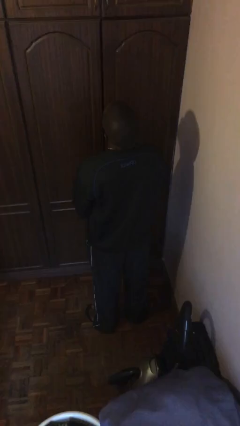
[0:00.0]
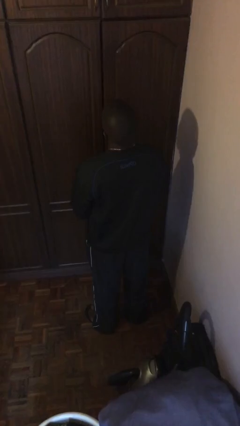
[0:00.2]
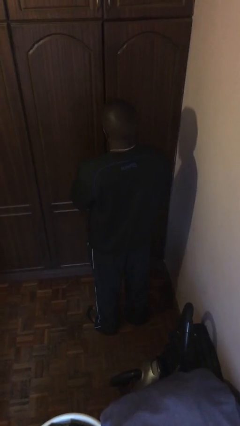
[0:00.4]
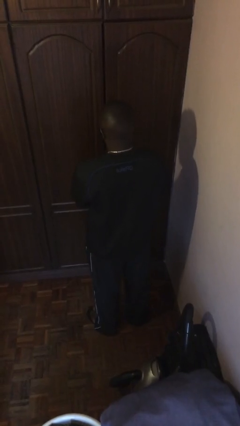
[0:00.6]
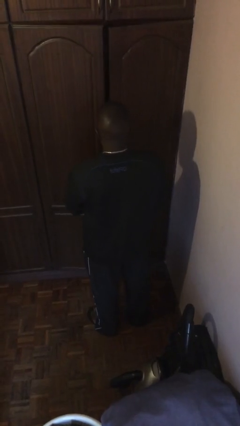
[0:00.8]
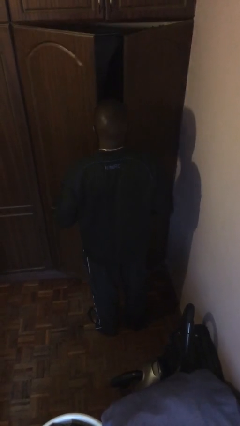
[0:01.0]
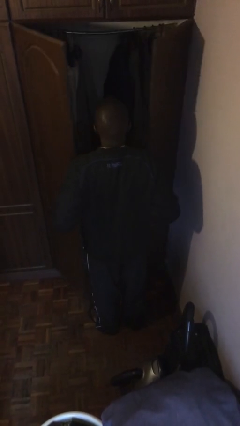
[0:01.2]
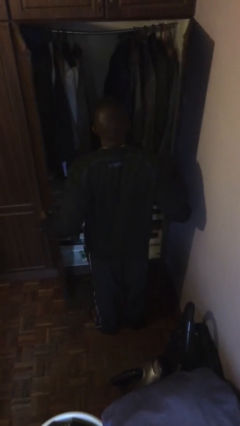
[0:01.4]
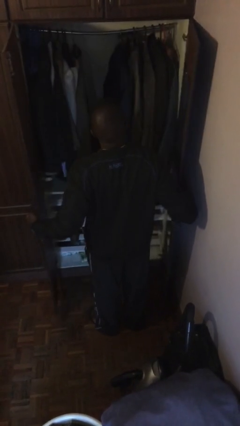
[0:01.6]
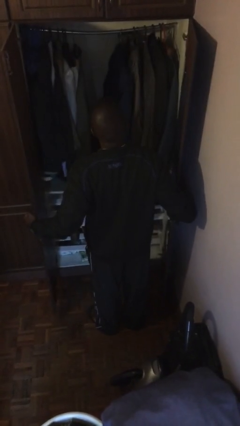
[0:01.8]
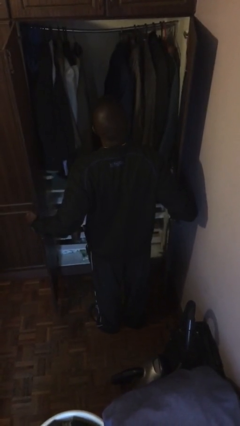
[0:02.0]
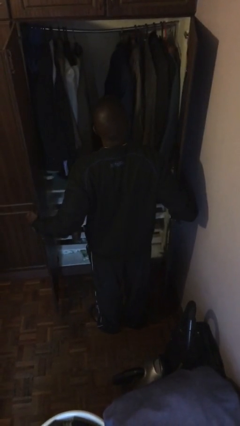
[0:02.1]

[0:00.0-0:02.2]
person opens closet door

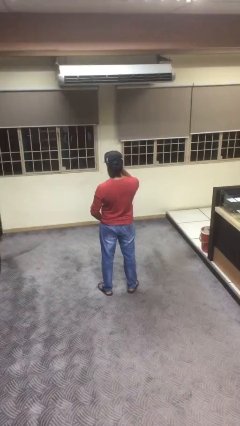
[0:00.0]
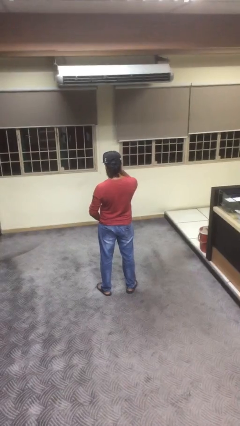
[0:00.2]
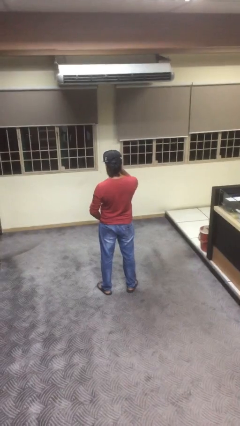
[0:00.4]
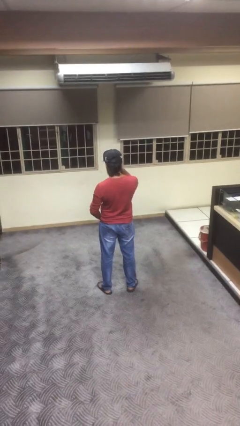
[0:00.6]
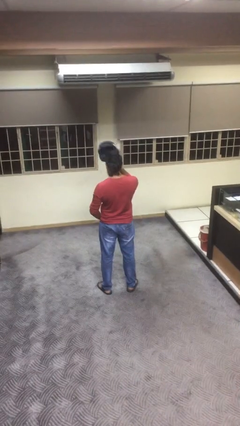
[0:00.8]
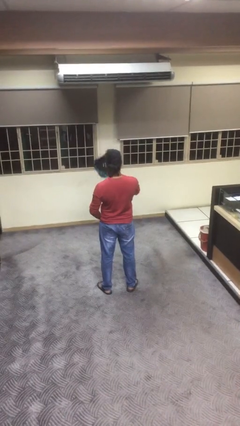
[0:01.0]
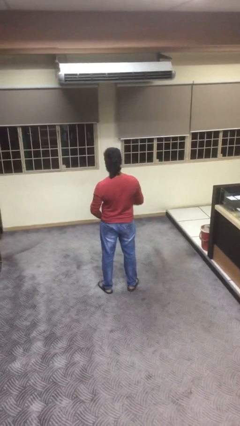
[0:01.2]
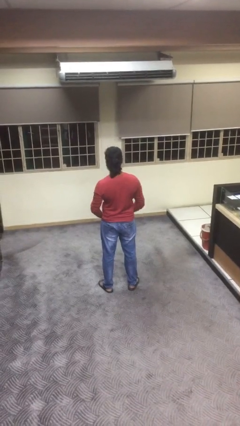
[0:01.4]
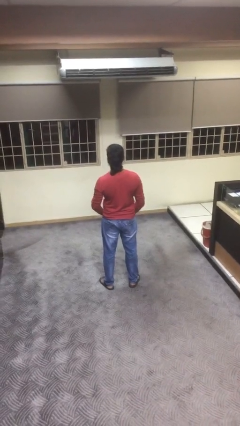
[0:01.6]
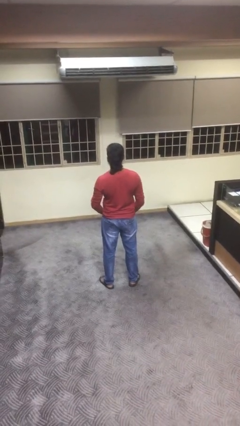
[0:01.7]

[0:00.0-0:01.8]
person takes off hat

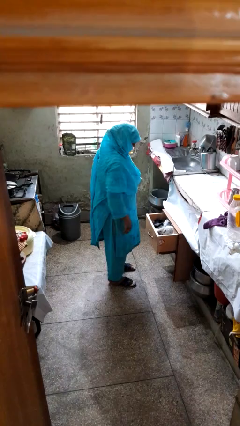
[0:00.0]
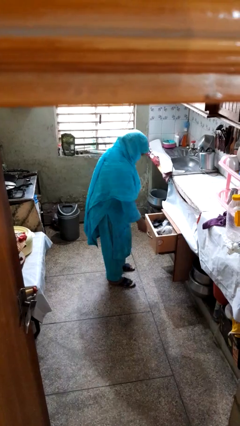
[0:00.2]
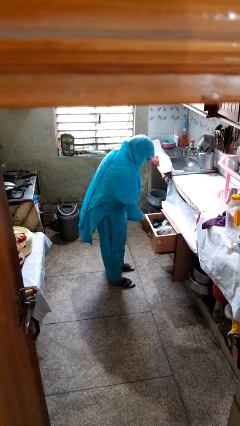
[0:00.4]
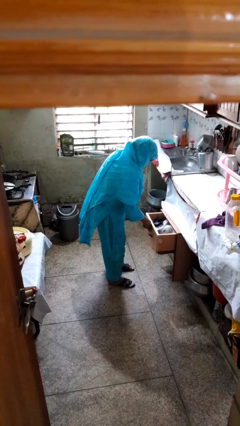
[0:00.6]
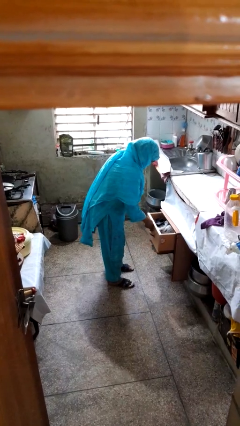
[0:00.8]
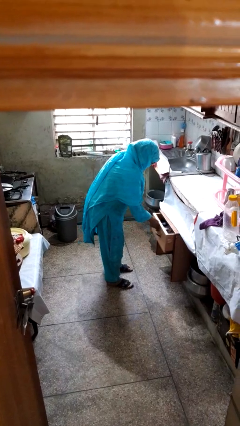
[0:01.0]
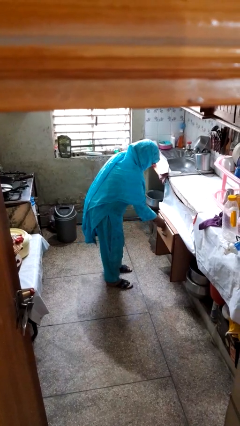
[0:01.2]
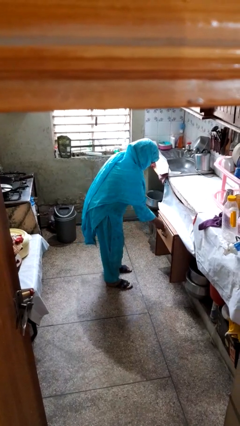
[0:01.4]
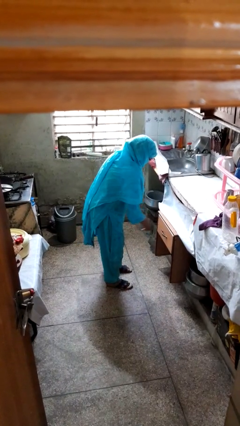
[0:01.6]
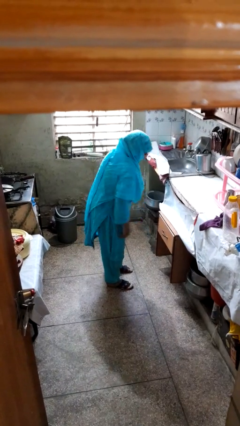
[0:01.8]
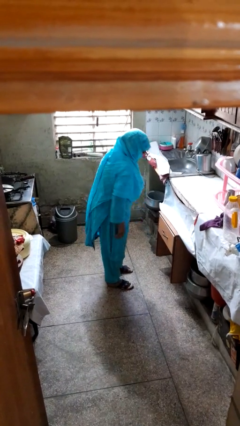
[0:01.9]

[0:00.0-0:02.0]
person closes kitchen drawer

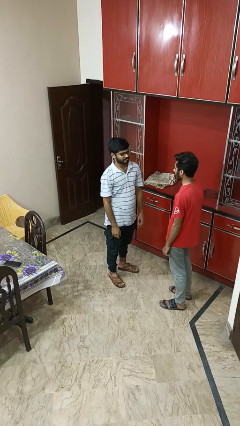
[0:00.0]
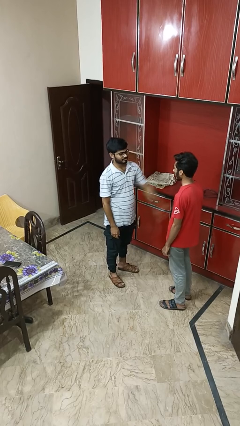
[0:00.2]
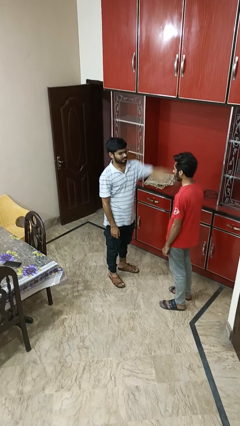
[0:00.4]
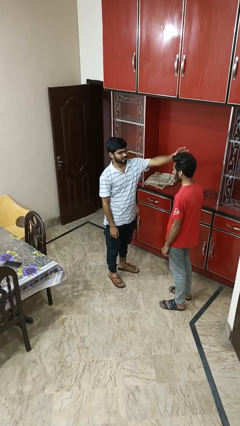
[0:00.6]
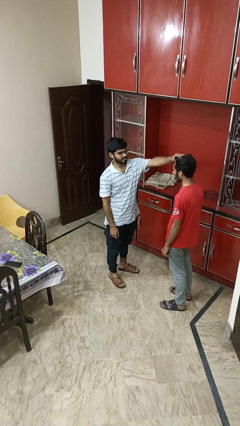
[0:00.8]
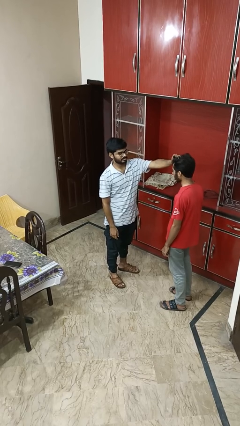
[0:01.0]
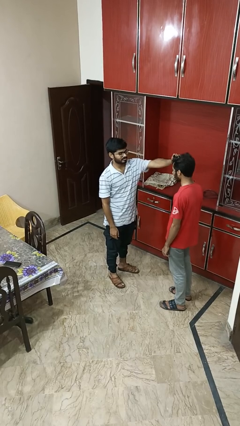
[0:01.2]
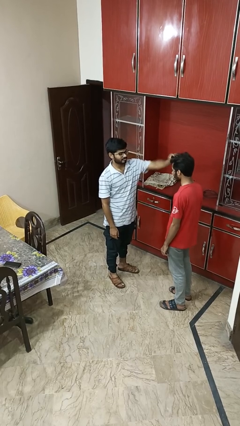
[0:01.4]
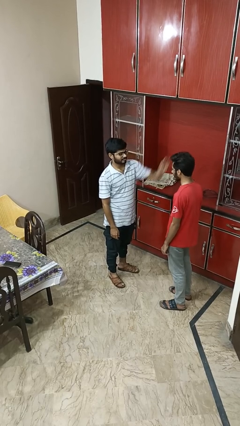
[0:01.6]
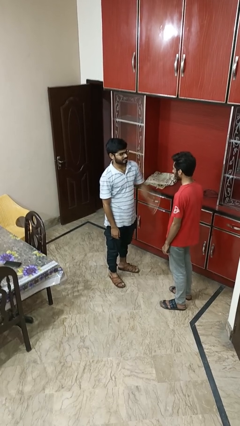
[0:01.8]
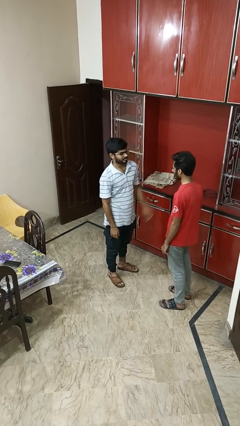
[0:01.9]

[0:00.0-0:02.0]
person grabs person by hair

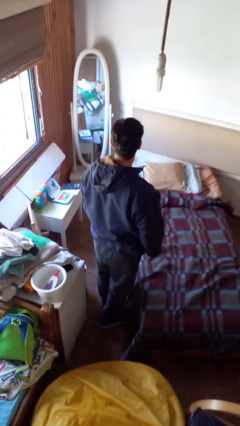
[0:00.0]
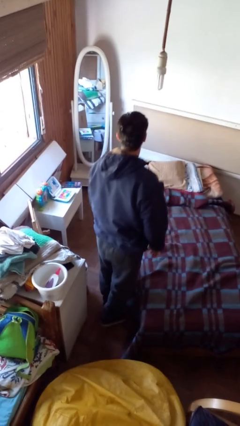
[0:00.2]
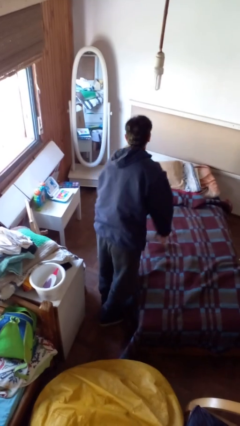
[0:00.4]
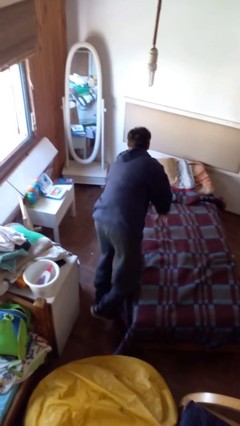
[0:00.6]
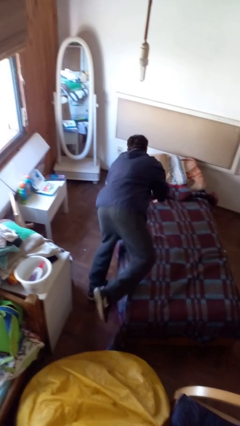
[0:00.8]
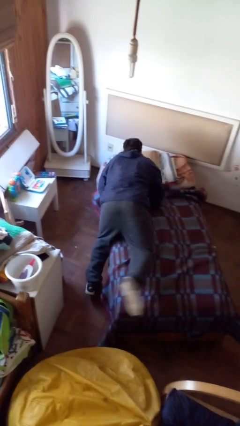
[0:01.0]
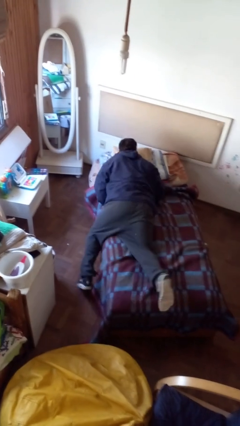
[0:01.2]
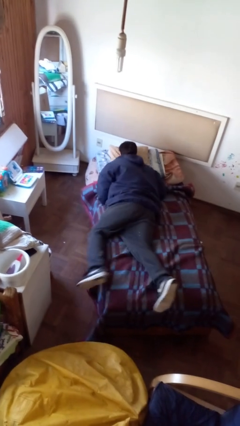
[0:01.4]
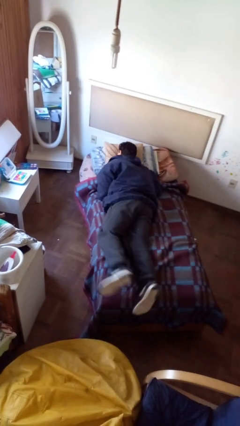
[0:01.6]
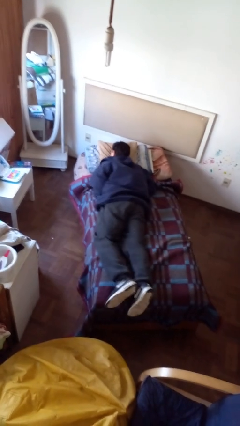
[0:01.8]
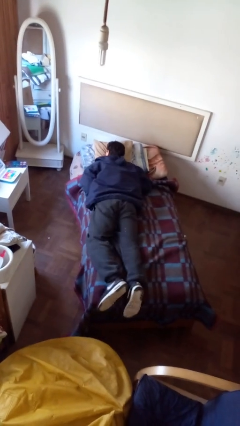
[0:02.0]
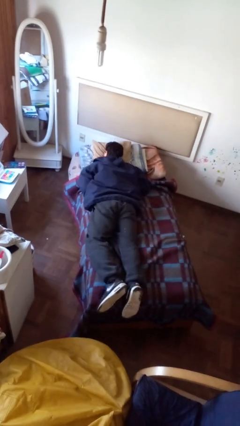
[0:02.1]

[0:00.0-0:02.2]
person lies down on bed

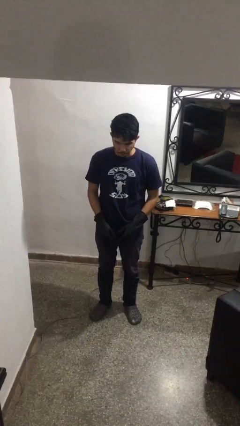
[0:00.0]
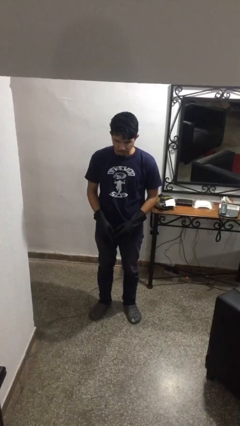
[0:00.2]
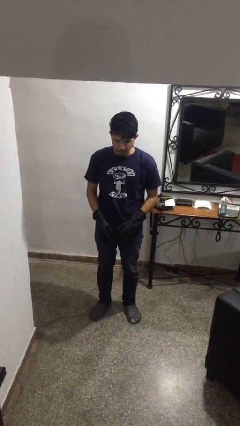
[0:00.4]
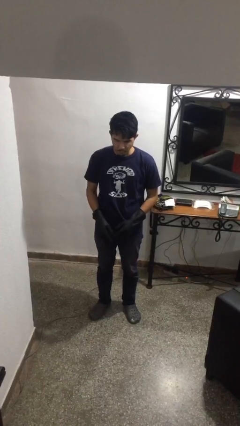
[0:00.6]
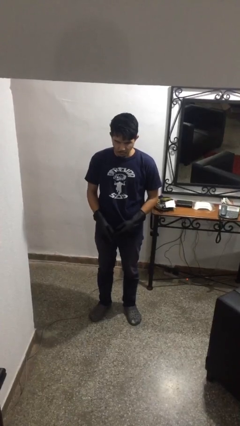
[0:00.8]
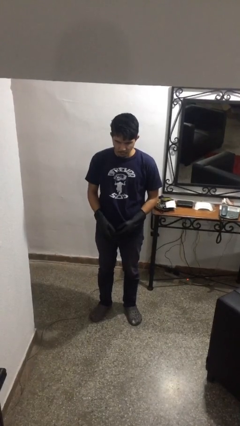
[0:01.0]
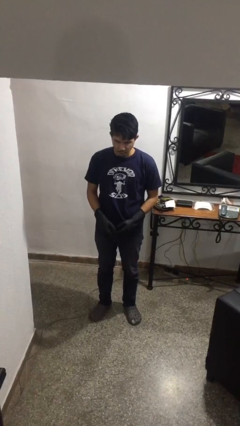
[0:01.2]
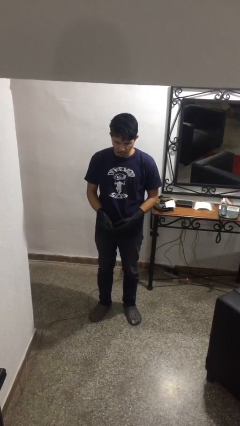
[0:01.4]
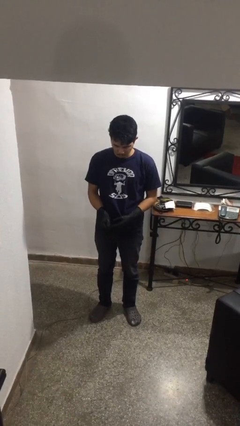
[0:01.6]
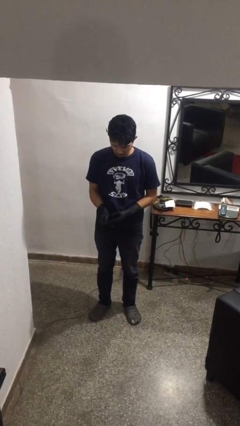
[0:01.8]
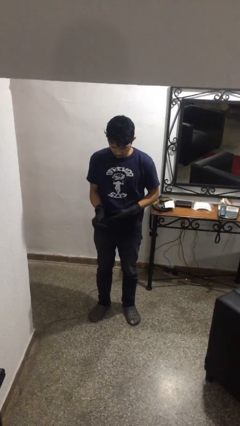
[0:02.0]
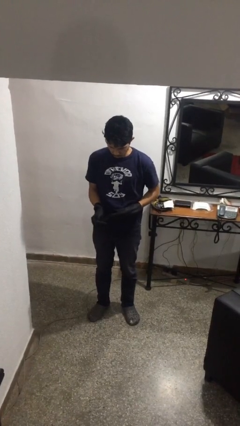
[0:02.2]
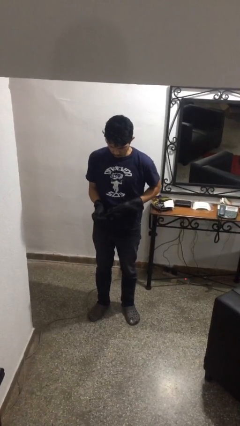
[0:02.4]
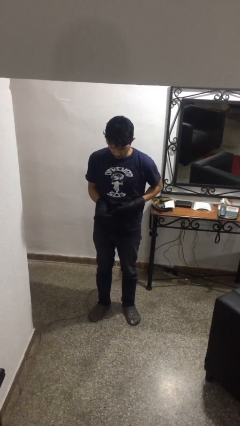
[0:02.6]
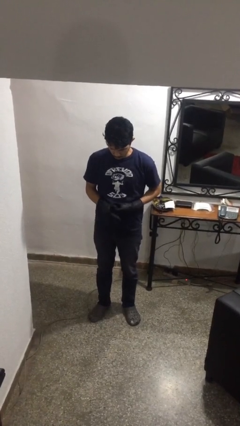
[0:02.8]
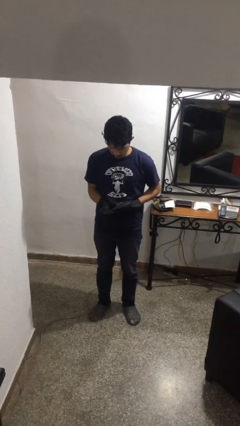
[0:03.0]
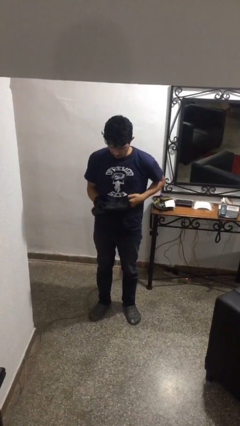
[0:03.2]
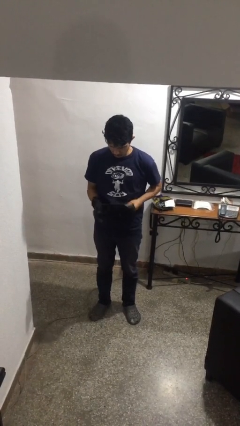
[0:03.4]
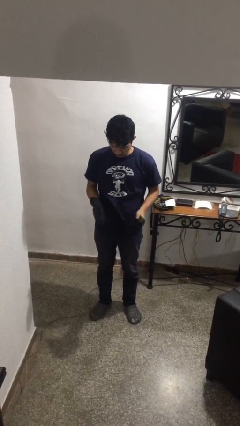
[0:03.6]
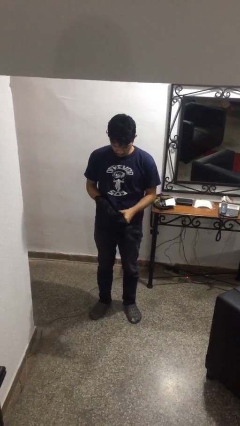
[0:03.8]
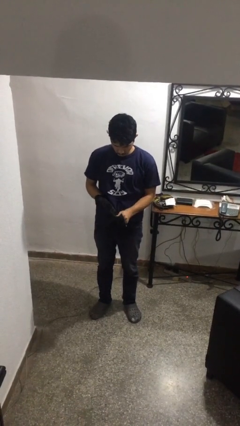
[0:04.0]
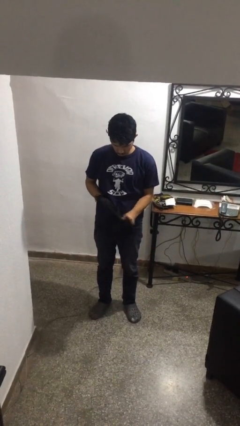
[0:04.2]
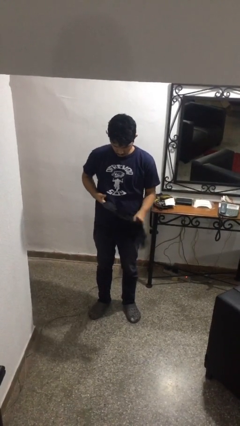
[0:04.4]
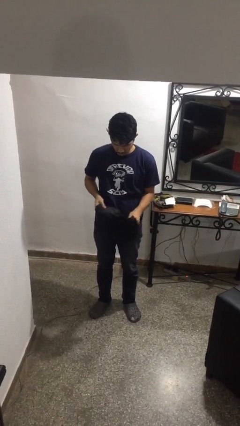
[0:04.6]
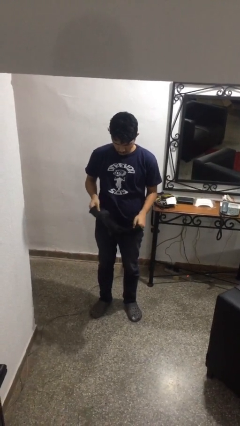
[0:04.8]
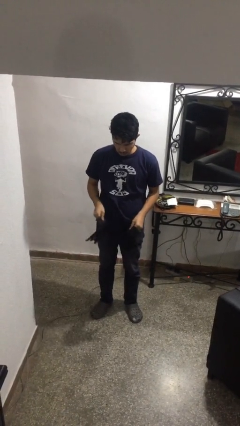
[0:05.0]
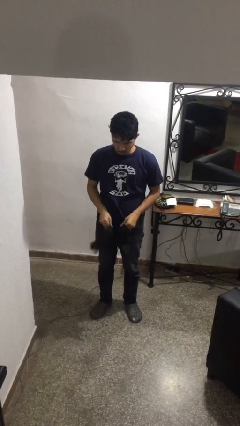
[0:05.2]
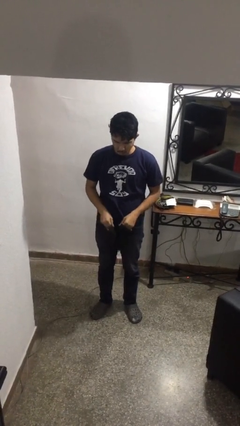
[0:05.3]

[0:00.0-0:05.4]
person takes off gloves

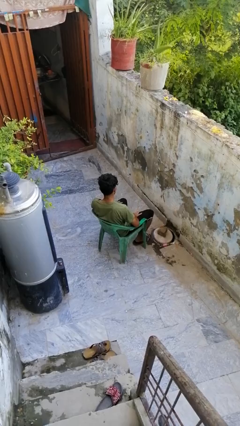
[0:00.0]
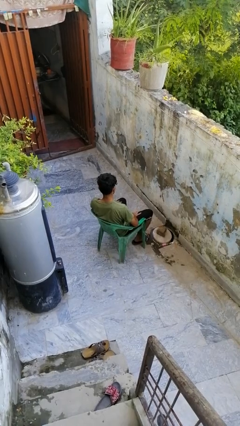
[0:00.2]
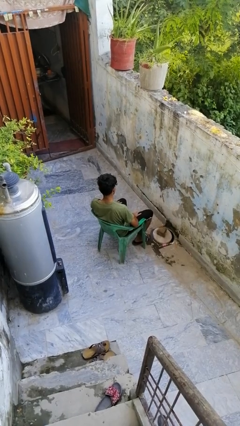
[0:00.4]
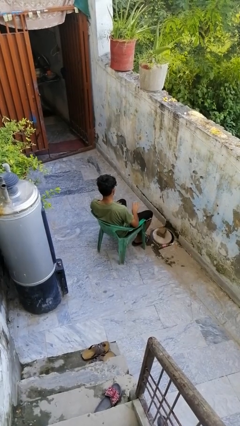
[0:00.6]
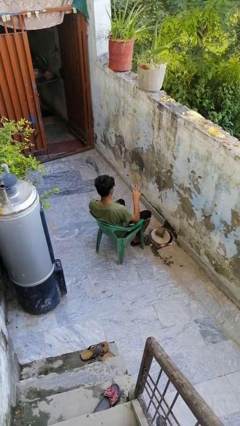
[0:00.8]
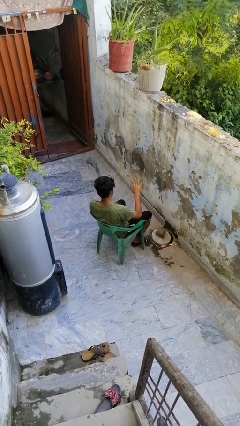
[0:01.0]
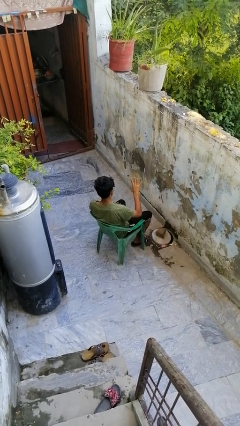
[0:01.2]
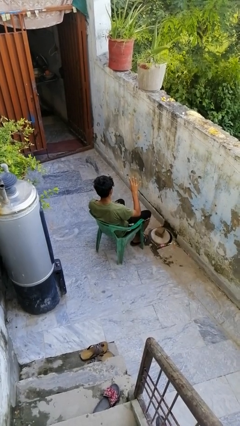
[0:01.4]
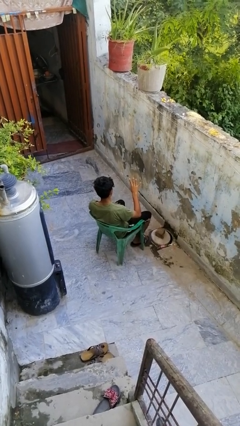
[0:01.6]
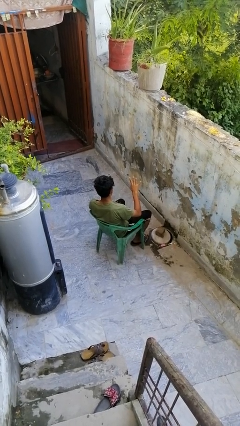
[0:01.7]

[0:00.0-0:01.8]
person gestures number four
